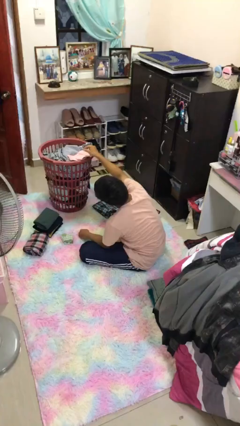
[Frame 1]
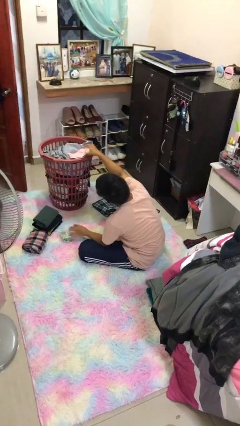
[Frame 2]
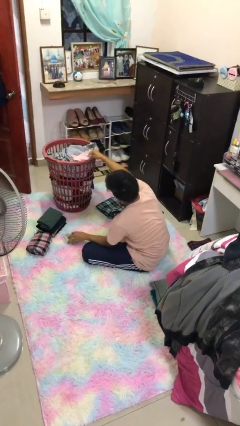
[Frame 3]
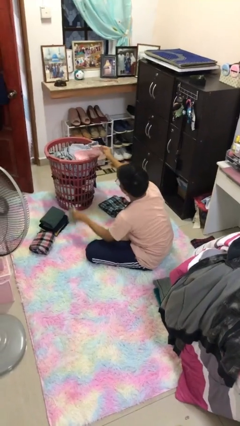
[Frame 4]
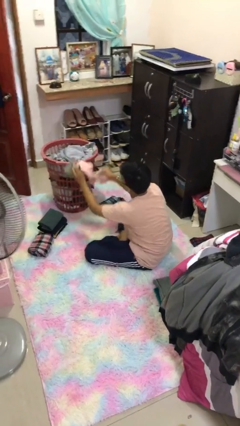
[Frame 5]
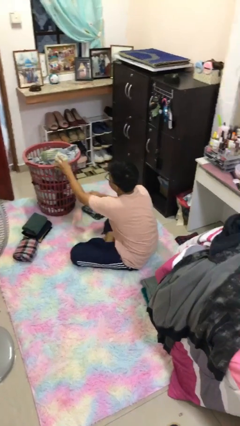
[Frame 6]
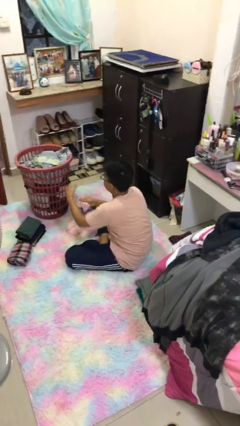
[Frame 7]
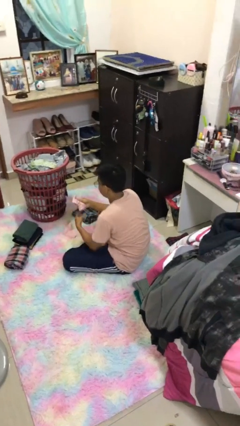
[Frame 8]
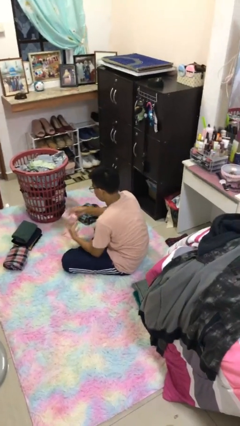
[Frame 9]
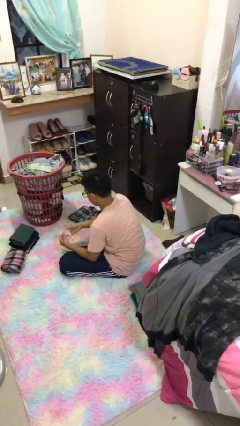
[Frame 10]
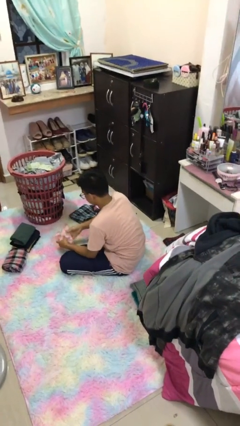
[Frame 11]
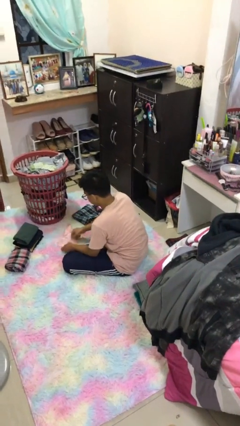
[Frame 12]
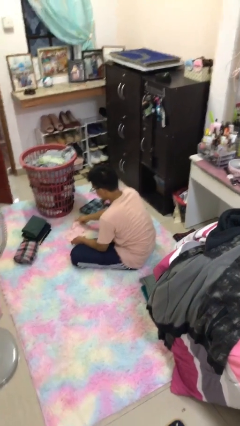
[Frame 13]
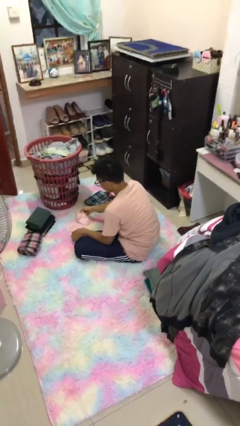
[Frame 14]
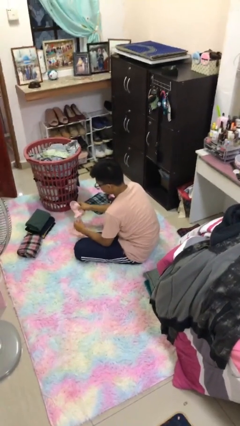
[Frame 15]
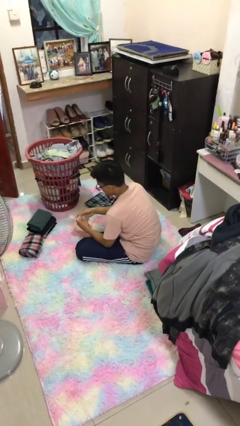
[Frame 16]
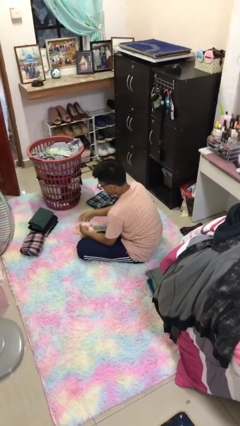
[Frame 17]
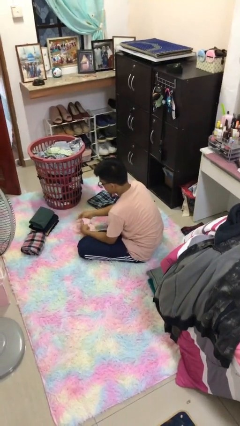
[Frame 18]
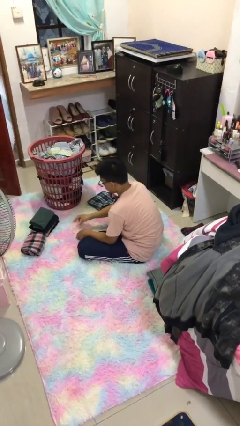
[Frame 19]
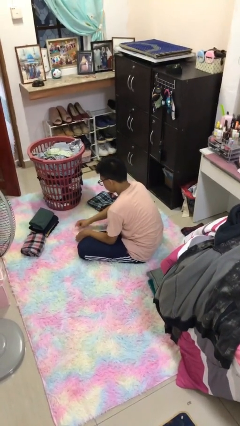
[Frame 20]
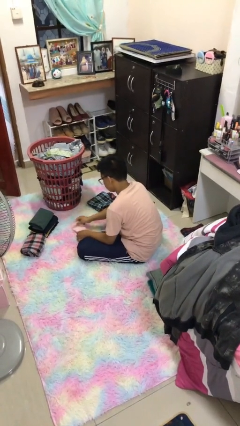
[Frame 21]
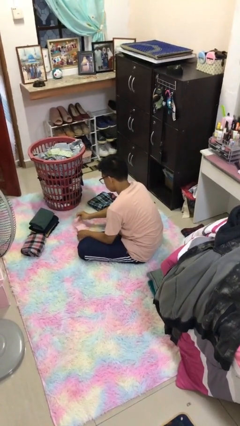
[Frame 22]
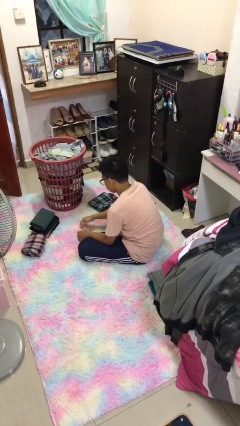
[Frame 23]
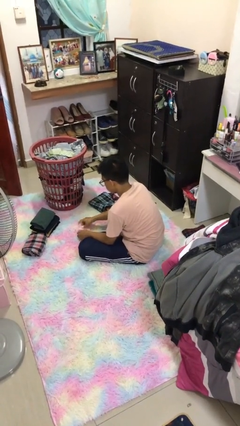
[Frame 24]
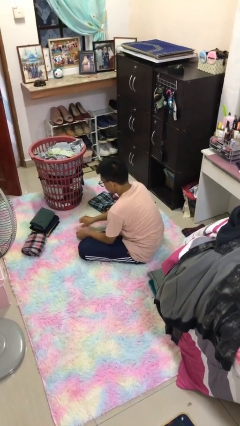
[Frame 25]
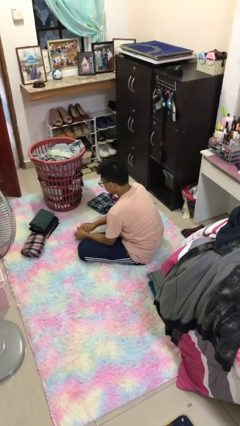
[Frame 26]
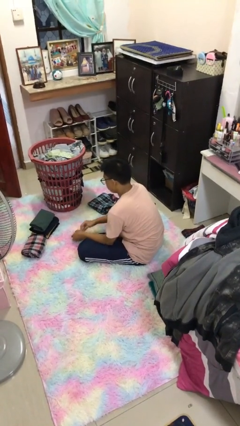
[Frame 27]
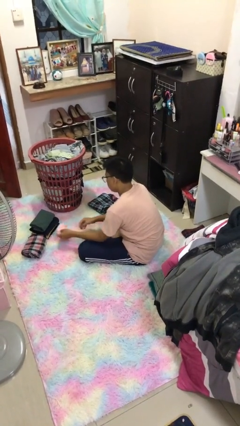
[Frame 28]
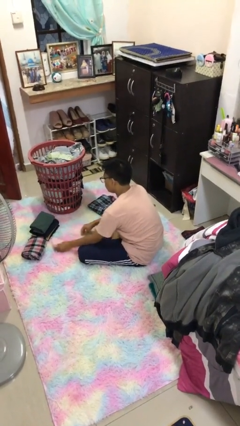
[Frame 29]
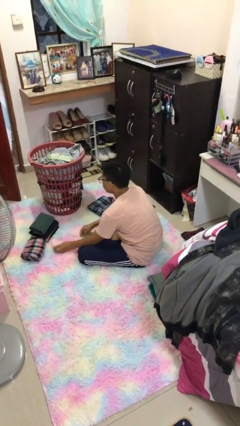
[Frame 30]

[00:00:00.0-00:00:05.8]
person folds socks

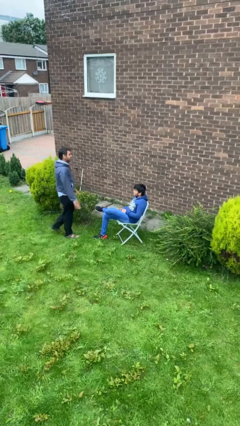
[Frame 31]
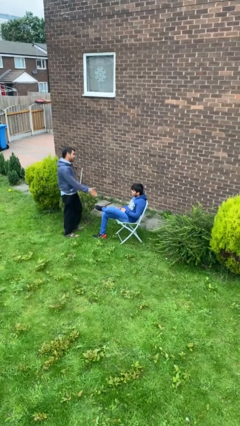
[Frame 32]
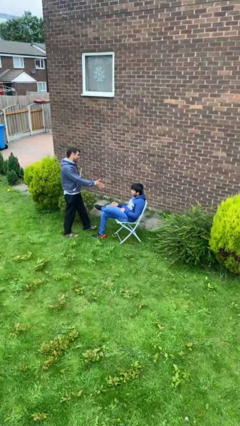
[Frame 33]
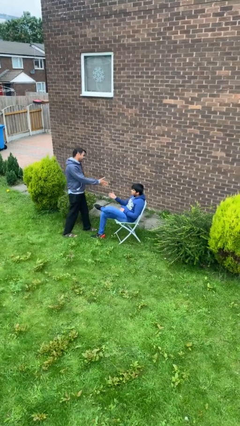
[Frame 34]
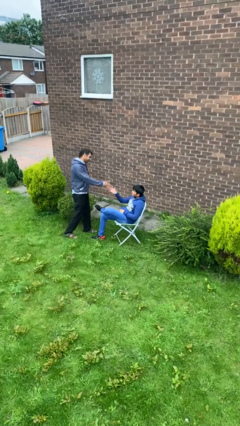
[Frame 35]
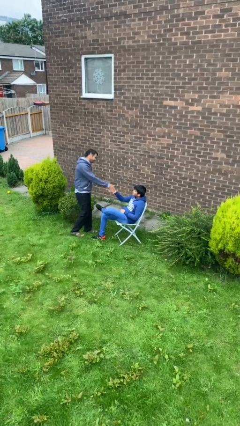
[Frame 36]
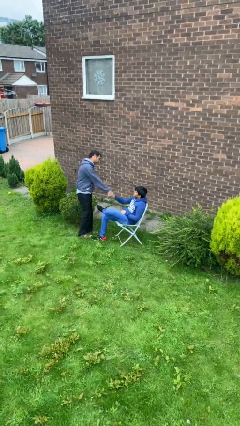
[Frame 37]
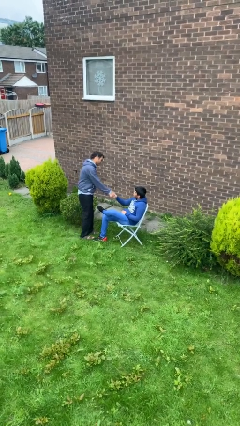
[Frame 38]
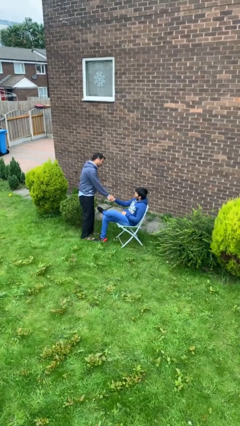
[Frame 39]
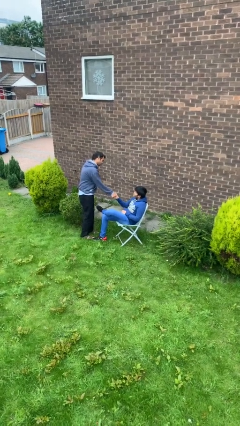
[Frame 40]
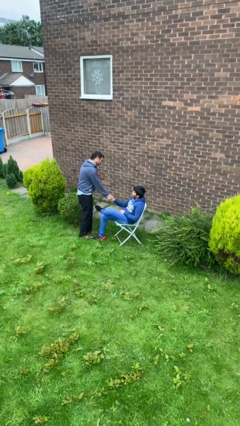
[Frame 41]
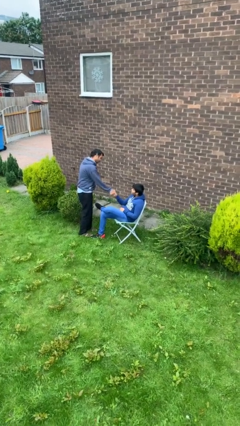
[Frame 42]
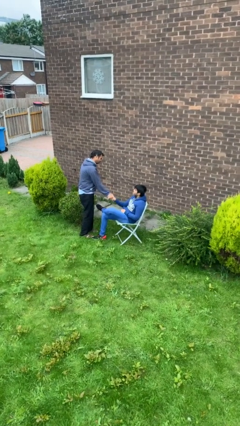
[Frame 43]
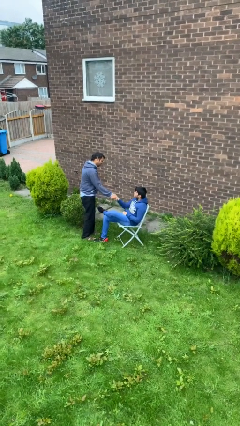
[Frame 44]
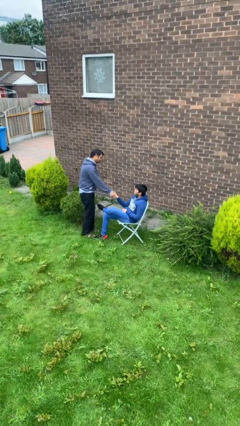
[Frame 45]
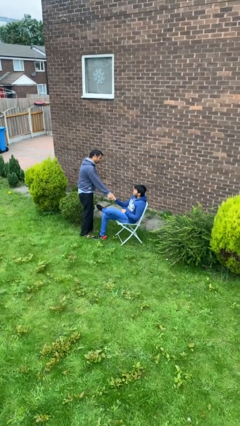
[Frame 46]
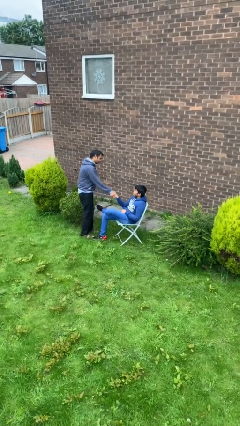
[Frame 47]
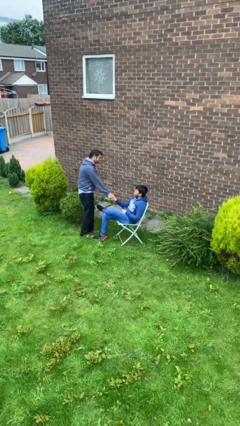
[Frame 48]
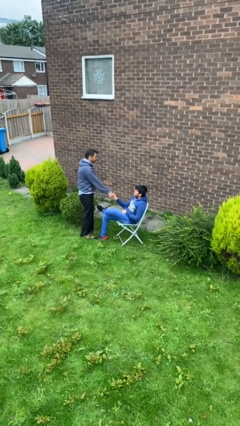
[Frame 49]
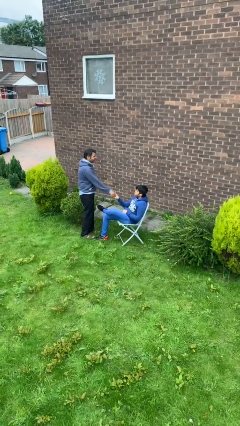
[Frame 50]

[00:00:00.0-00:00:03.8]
person shakes hand

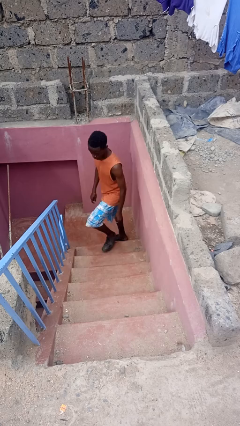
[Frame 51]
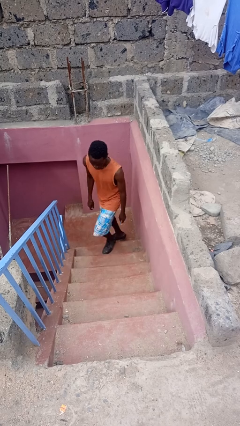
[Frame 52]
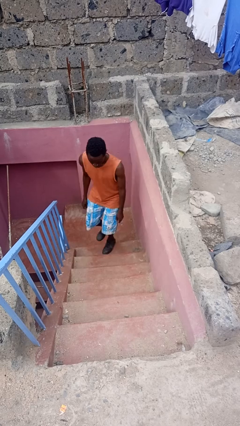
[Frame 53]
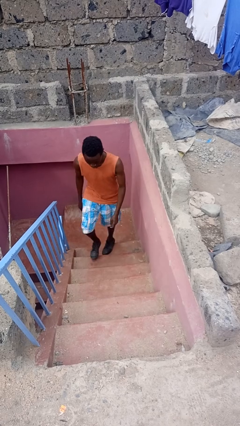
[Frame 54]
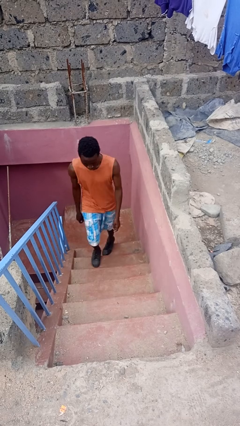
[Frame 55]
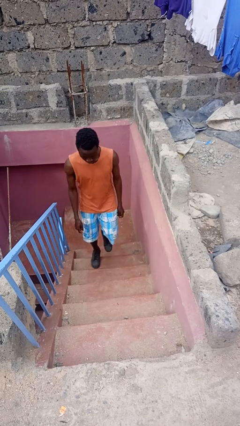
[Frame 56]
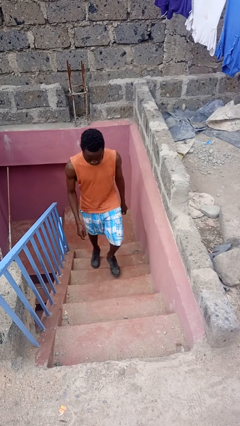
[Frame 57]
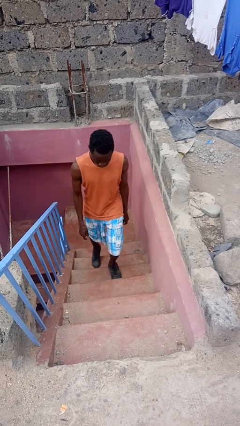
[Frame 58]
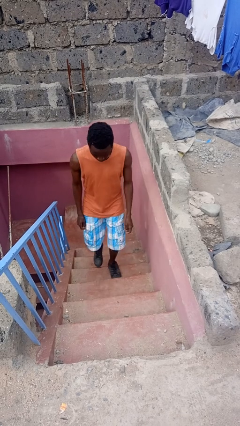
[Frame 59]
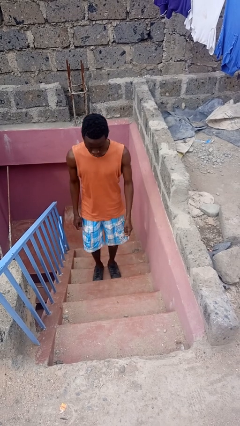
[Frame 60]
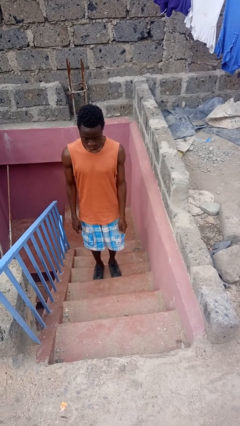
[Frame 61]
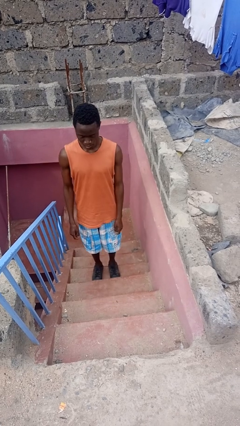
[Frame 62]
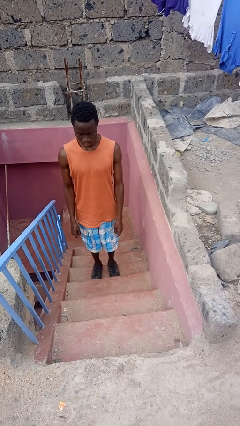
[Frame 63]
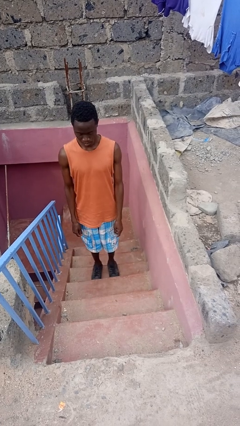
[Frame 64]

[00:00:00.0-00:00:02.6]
person climbs up stairs

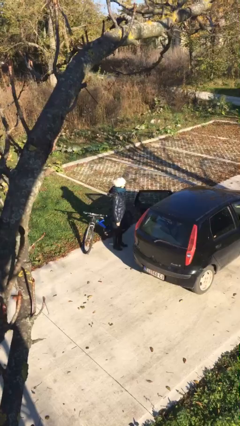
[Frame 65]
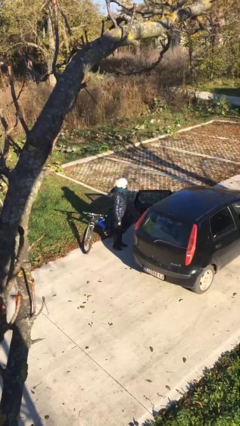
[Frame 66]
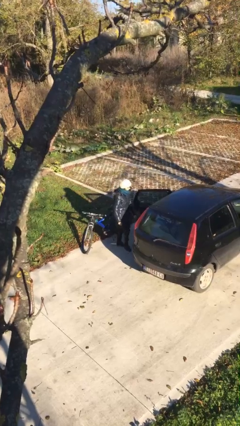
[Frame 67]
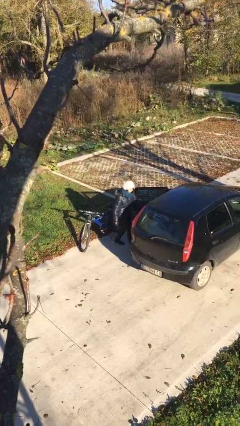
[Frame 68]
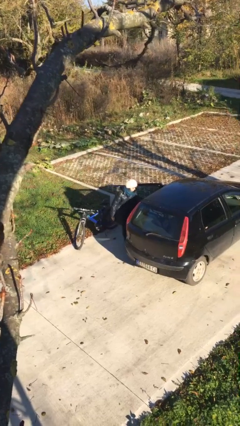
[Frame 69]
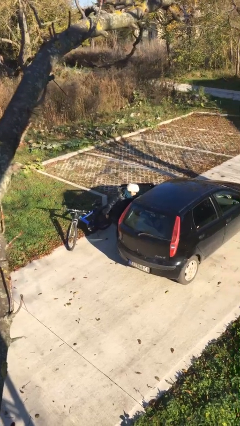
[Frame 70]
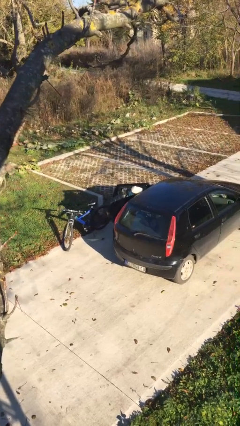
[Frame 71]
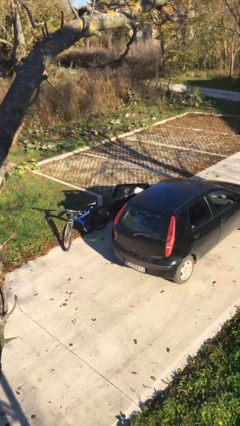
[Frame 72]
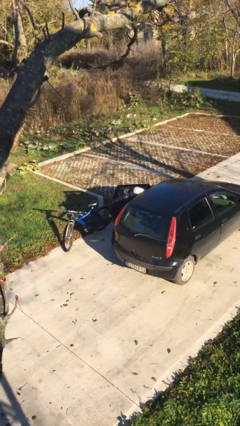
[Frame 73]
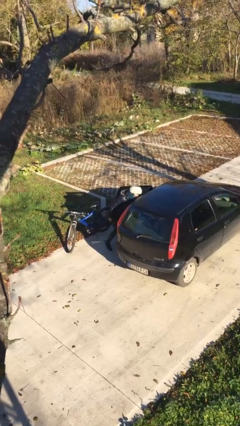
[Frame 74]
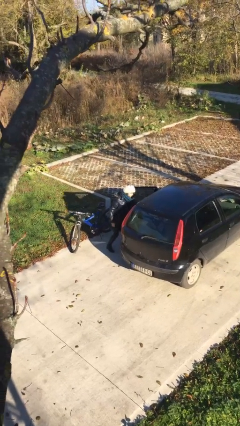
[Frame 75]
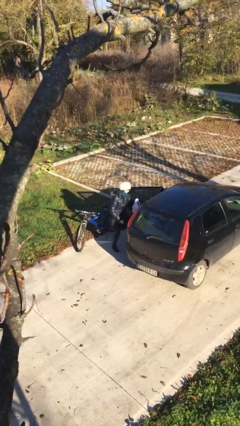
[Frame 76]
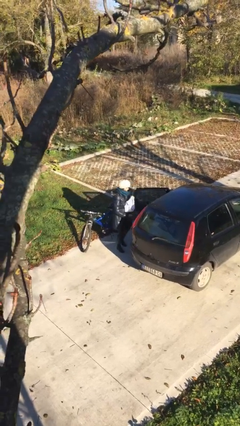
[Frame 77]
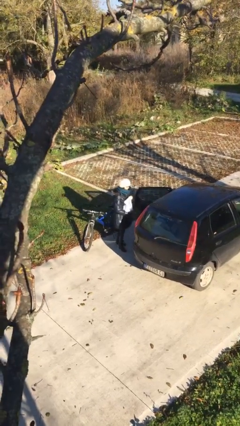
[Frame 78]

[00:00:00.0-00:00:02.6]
person unloads car

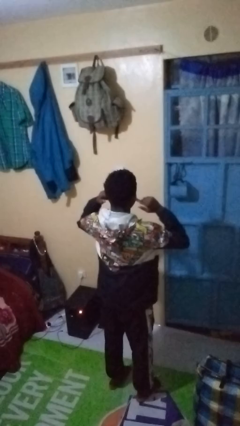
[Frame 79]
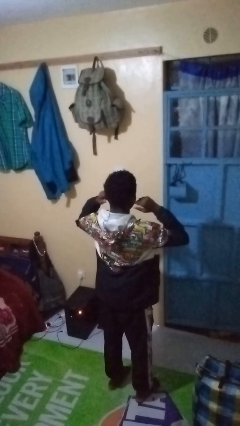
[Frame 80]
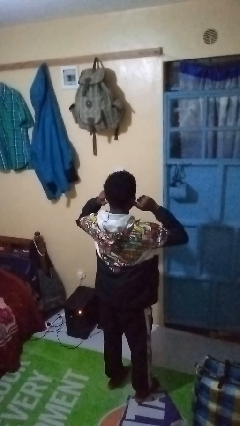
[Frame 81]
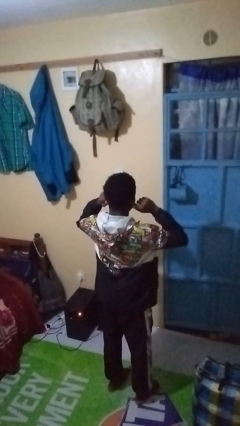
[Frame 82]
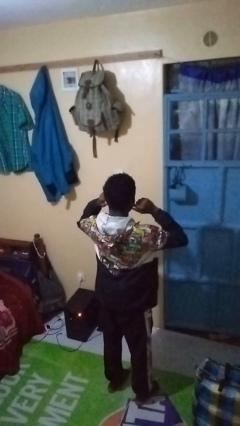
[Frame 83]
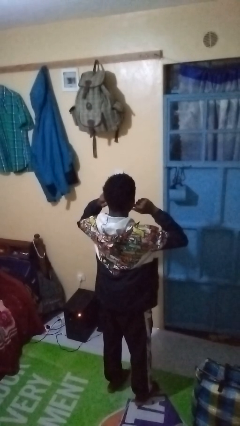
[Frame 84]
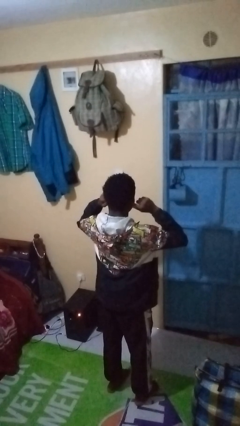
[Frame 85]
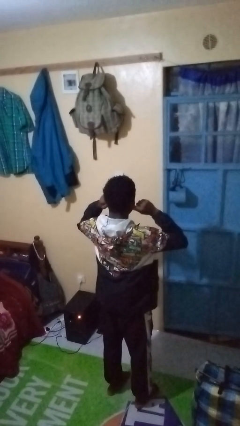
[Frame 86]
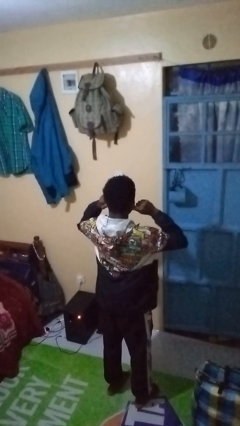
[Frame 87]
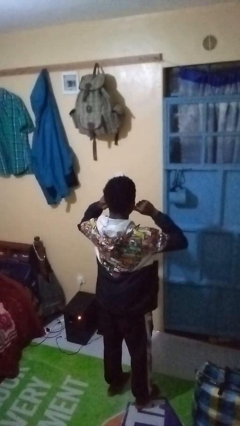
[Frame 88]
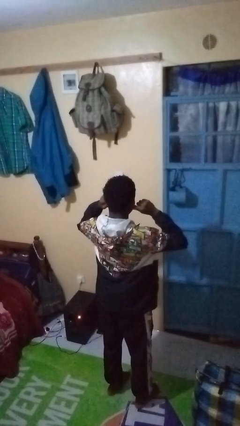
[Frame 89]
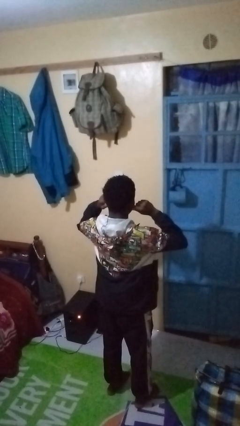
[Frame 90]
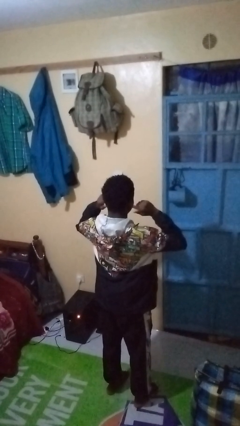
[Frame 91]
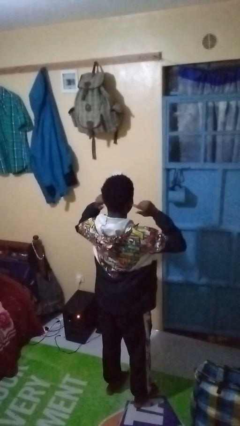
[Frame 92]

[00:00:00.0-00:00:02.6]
person puts fingers in ear
